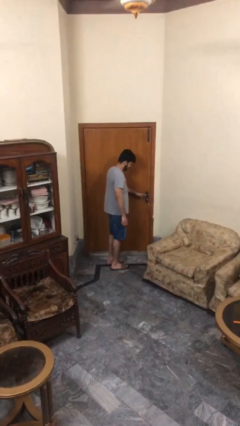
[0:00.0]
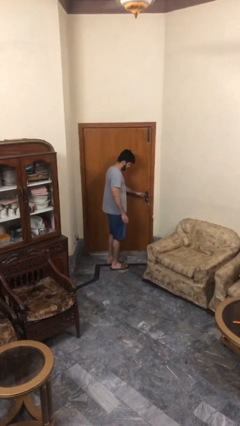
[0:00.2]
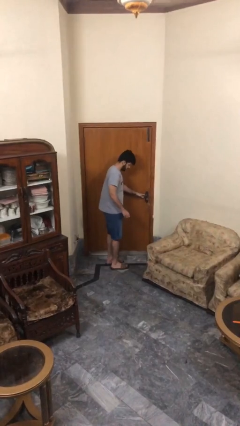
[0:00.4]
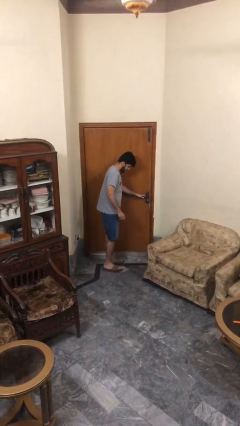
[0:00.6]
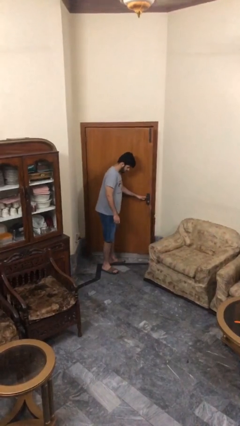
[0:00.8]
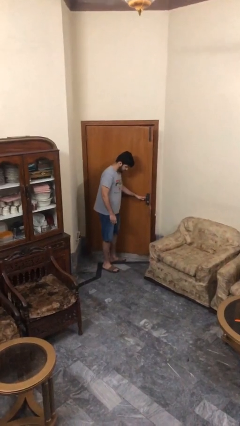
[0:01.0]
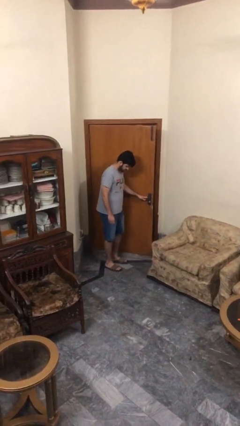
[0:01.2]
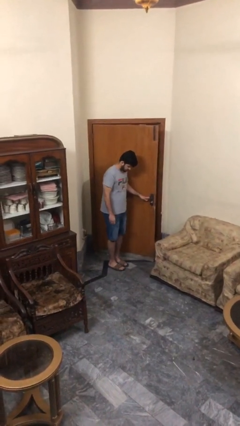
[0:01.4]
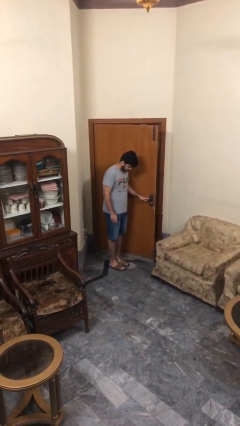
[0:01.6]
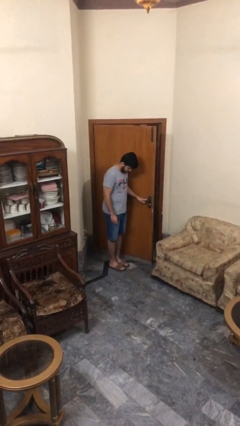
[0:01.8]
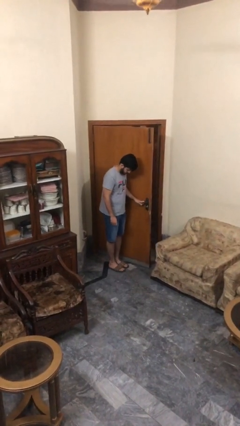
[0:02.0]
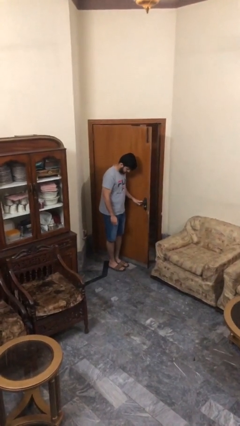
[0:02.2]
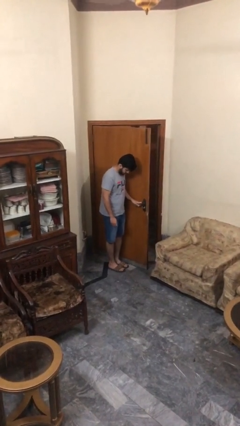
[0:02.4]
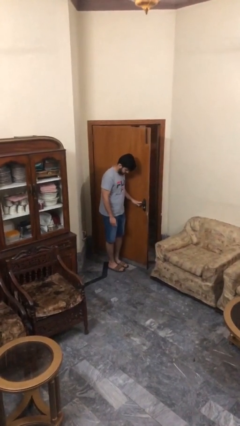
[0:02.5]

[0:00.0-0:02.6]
person opens facility door

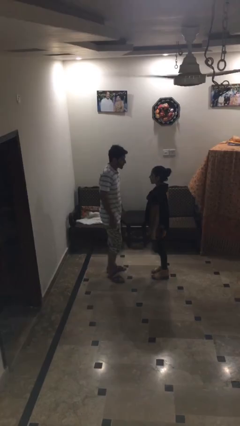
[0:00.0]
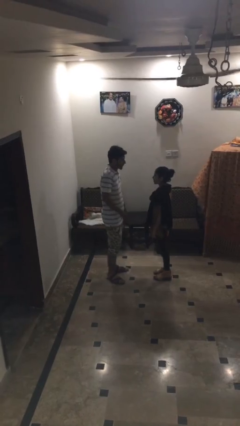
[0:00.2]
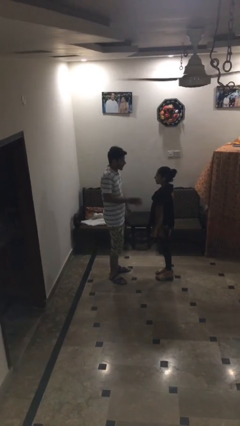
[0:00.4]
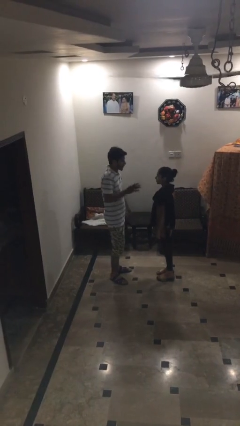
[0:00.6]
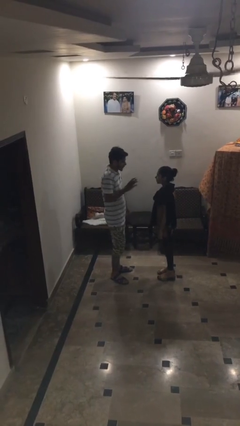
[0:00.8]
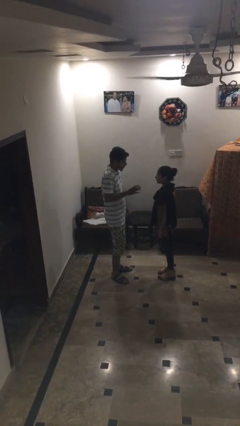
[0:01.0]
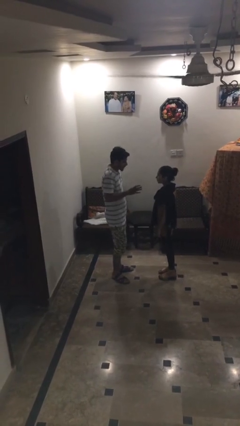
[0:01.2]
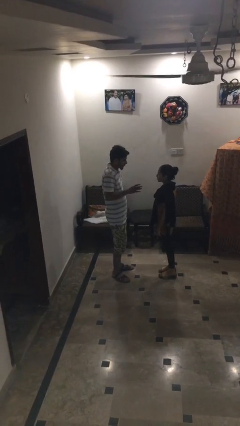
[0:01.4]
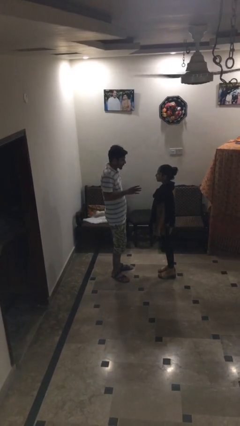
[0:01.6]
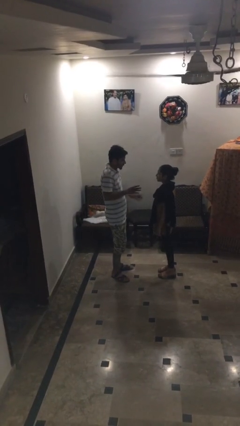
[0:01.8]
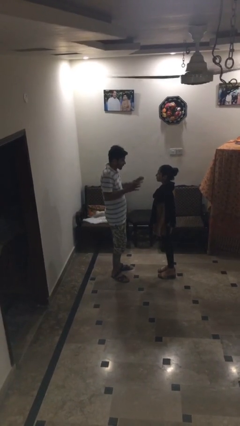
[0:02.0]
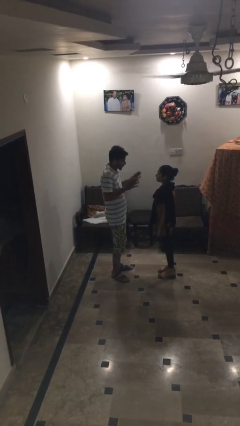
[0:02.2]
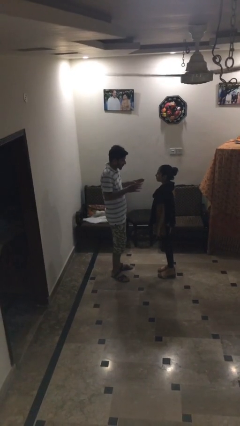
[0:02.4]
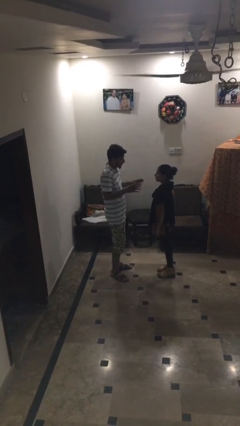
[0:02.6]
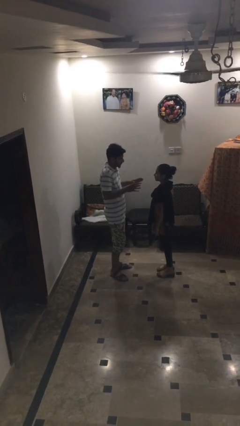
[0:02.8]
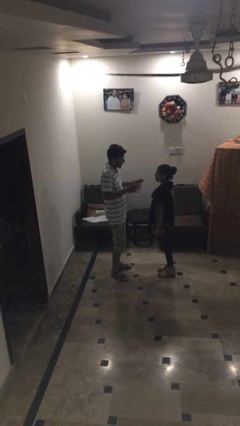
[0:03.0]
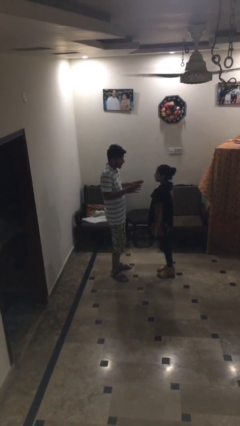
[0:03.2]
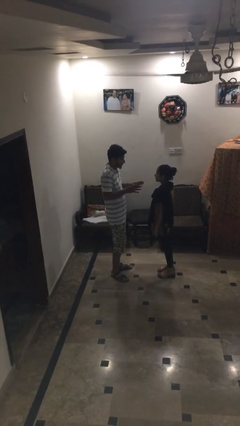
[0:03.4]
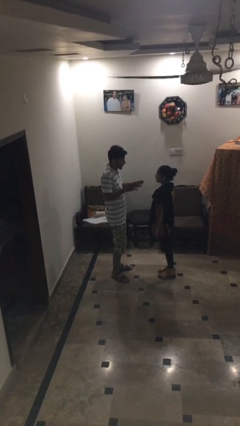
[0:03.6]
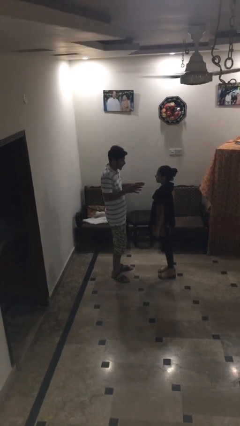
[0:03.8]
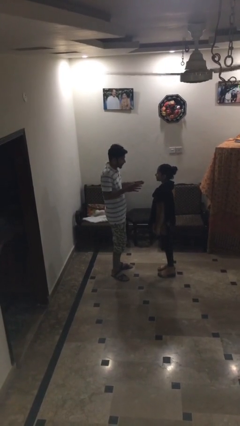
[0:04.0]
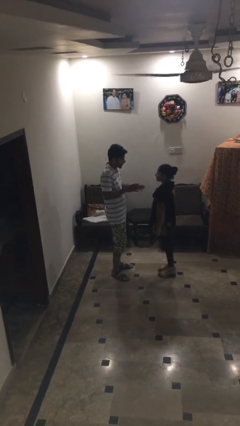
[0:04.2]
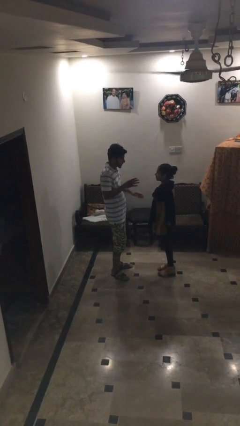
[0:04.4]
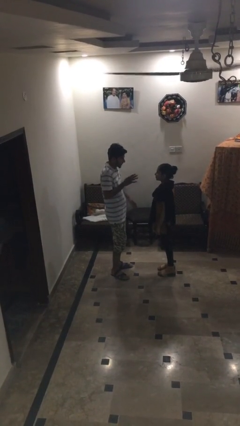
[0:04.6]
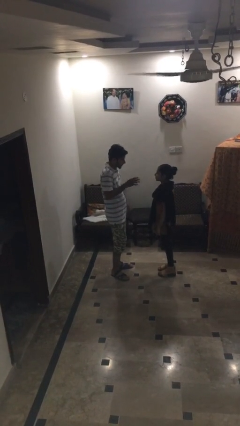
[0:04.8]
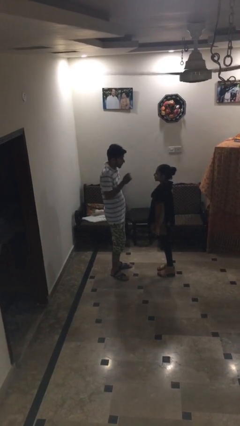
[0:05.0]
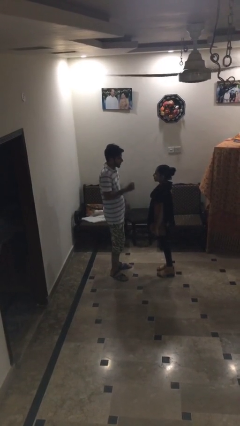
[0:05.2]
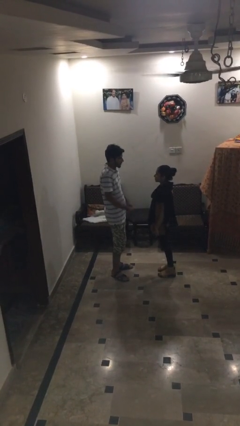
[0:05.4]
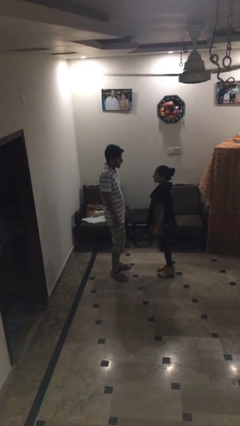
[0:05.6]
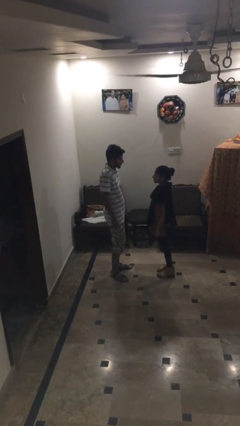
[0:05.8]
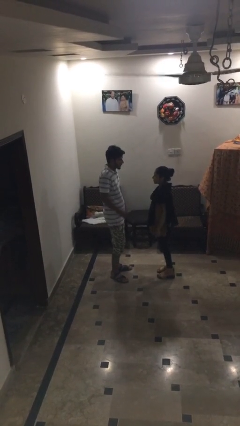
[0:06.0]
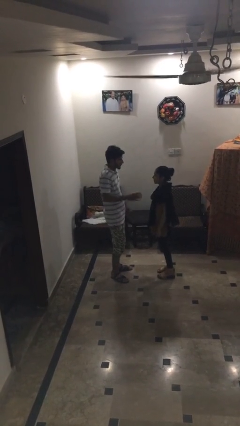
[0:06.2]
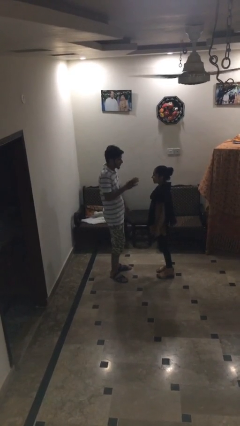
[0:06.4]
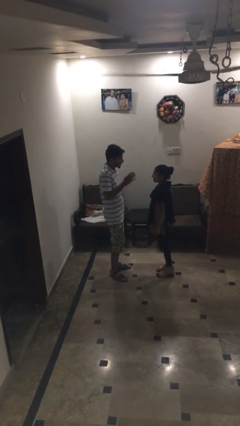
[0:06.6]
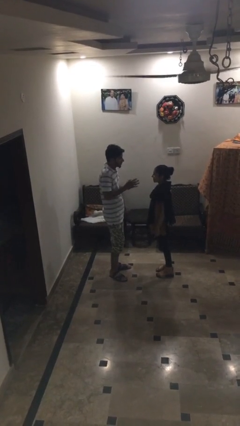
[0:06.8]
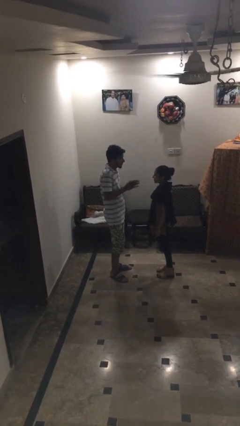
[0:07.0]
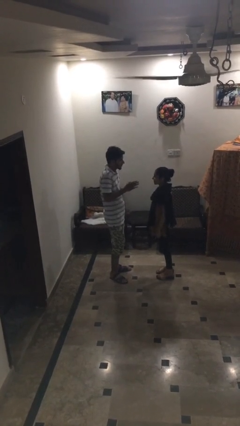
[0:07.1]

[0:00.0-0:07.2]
person talks to person

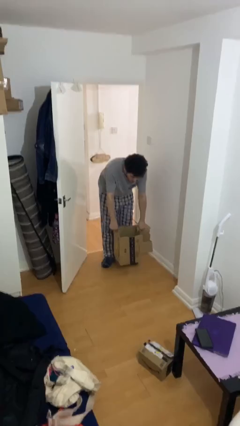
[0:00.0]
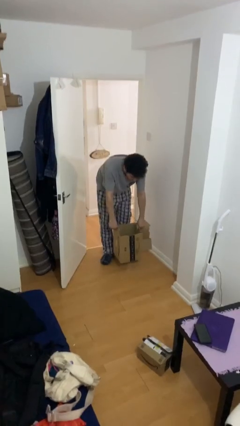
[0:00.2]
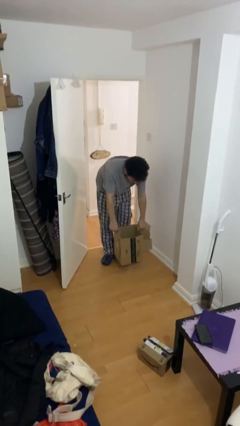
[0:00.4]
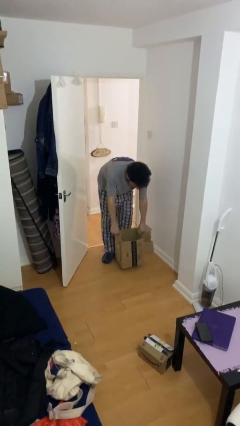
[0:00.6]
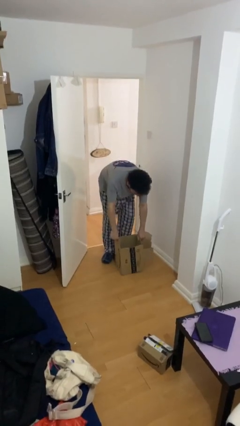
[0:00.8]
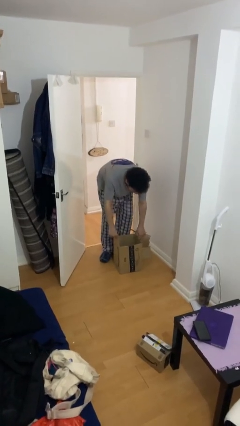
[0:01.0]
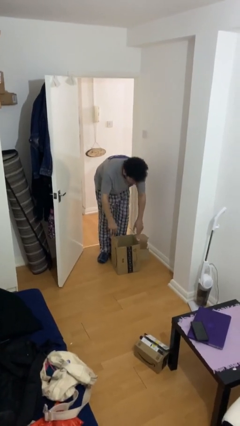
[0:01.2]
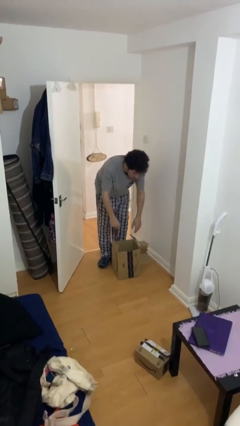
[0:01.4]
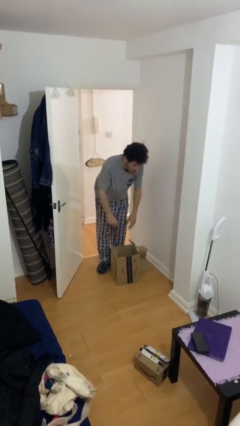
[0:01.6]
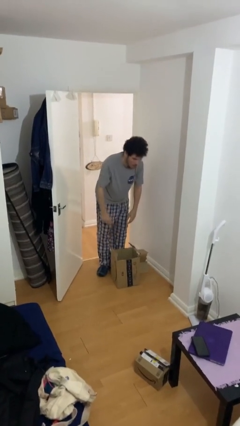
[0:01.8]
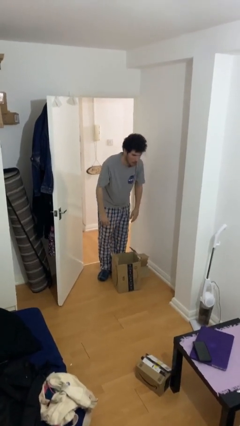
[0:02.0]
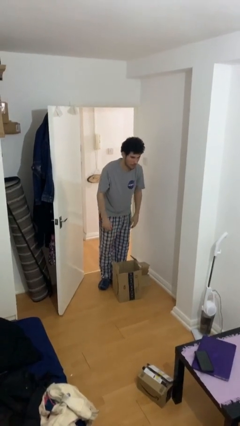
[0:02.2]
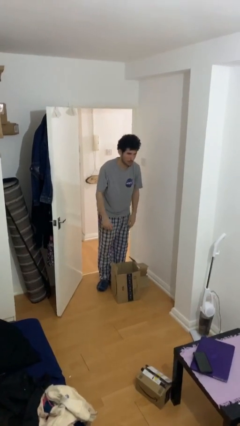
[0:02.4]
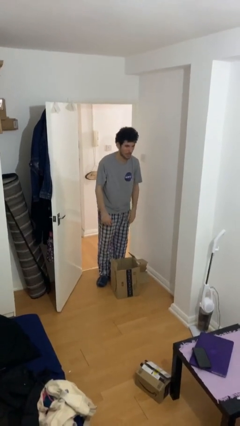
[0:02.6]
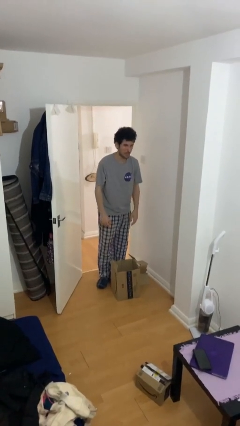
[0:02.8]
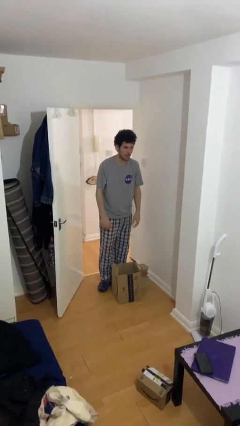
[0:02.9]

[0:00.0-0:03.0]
person puts down object on floor

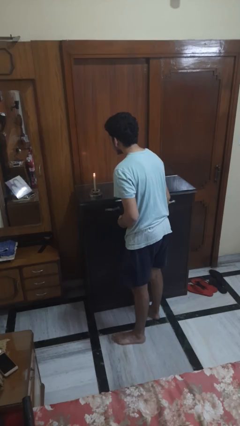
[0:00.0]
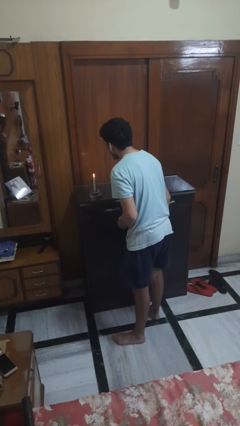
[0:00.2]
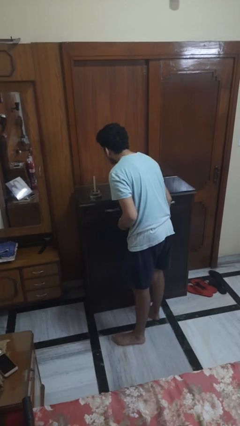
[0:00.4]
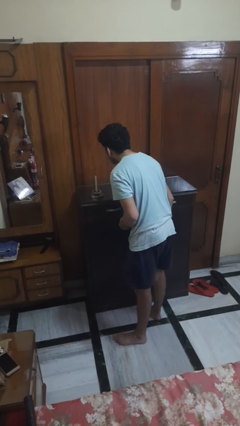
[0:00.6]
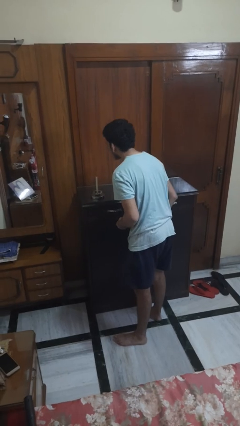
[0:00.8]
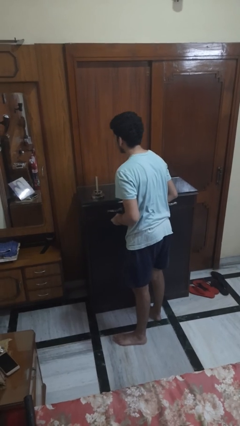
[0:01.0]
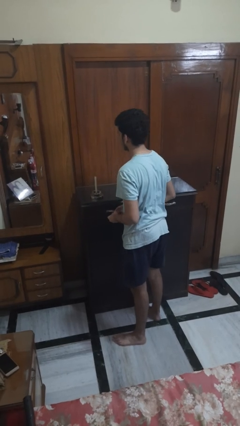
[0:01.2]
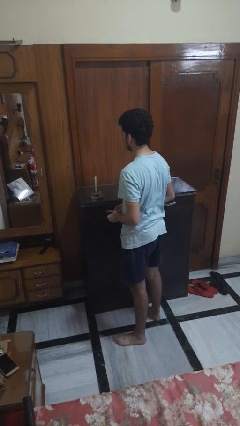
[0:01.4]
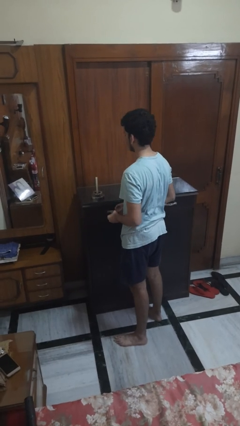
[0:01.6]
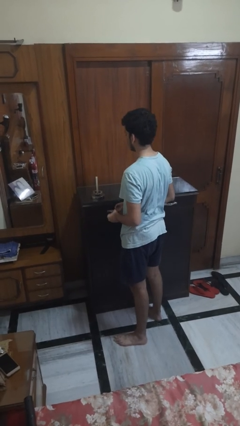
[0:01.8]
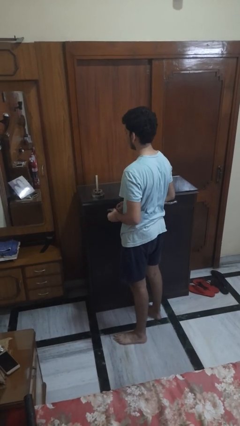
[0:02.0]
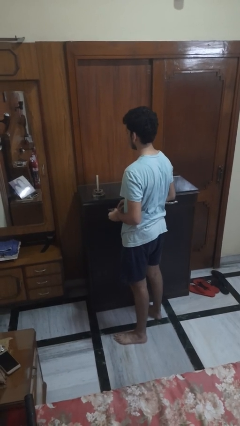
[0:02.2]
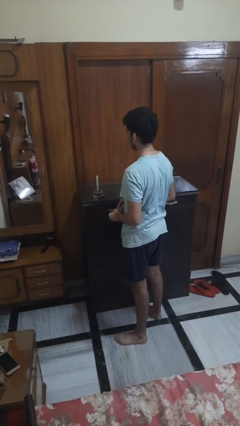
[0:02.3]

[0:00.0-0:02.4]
person extinguishes candle

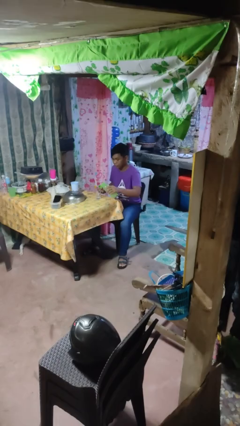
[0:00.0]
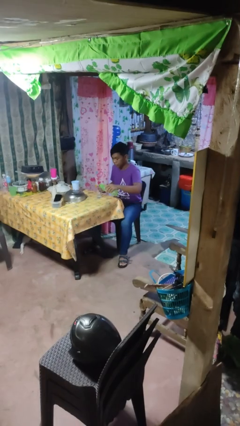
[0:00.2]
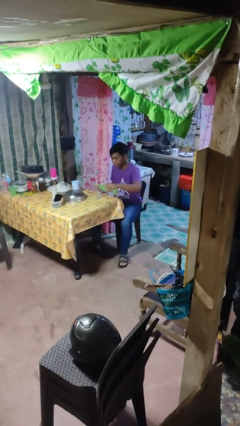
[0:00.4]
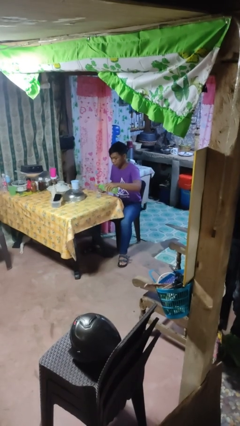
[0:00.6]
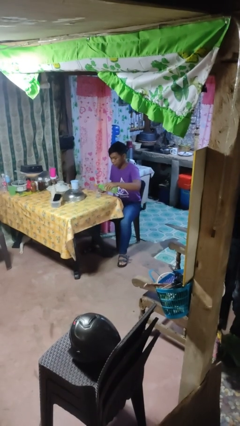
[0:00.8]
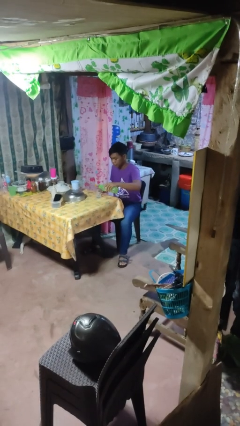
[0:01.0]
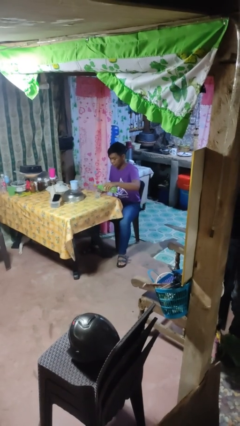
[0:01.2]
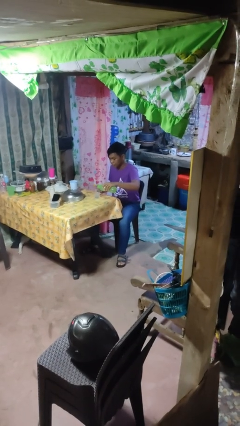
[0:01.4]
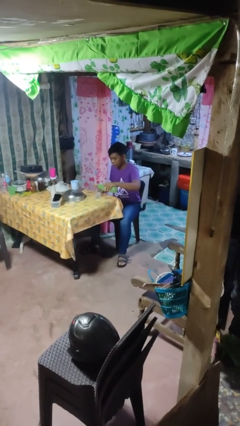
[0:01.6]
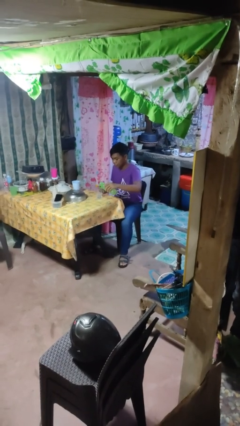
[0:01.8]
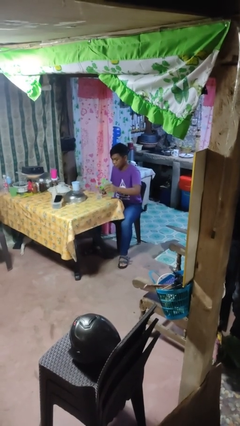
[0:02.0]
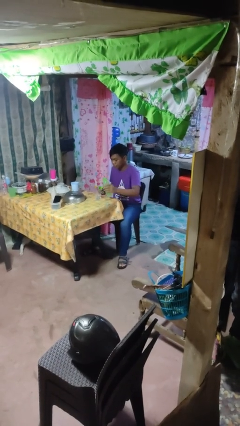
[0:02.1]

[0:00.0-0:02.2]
person pours liquid into cup

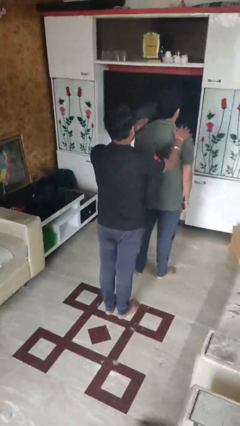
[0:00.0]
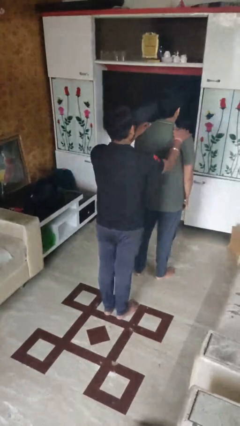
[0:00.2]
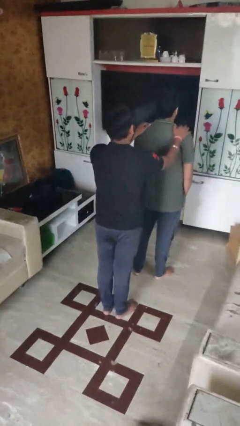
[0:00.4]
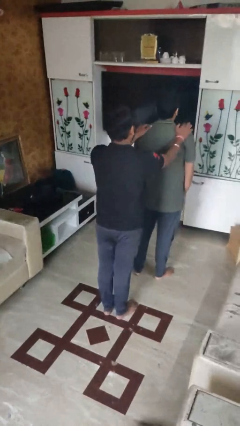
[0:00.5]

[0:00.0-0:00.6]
person grabs person by shoulder
